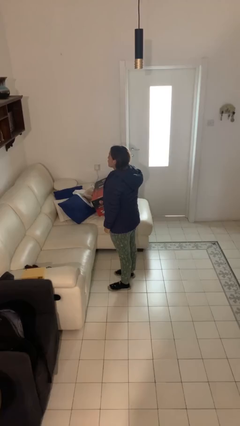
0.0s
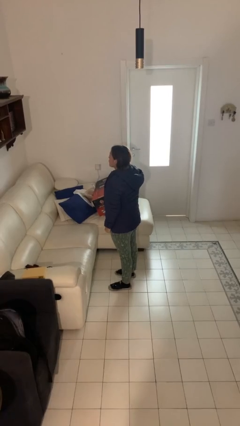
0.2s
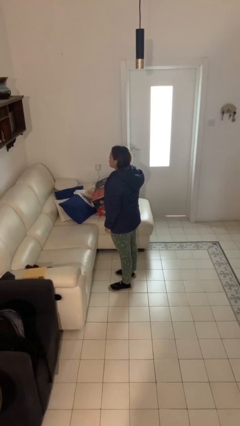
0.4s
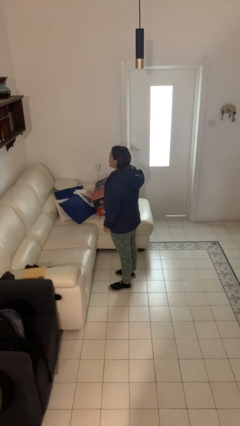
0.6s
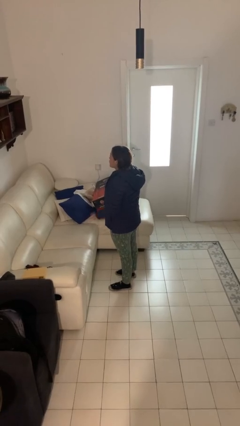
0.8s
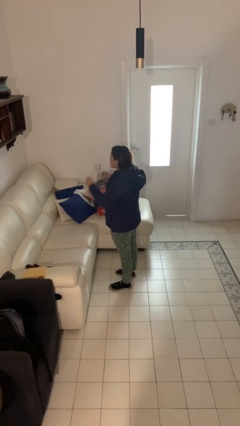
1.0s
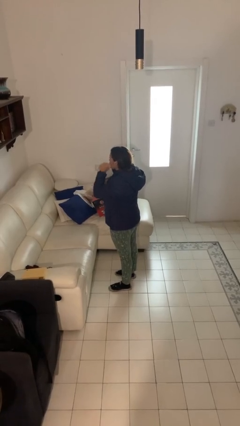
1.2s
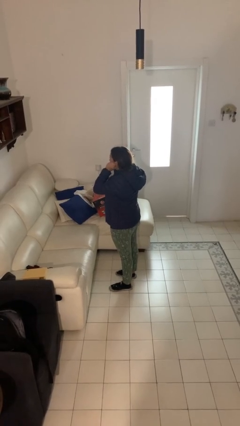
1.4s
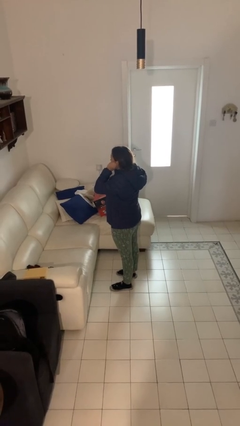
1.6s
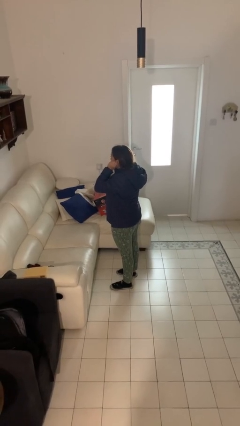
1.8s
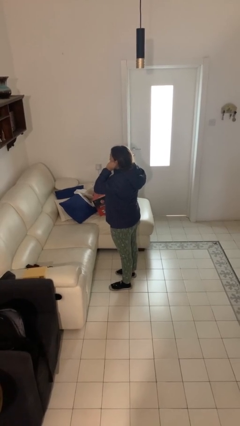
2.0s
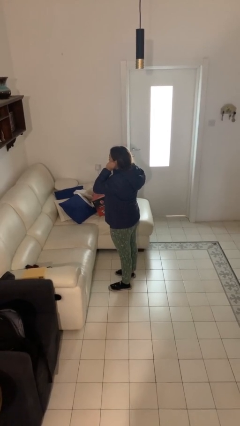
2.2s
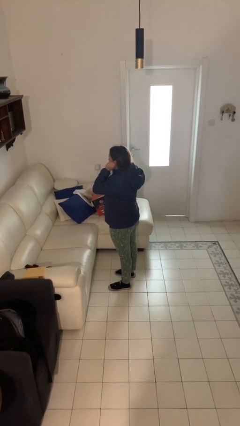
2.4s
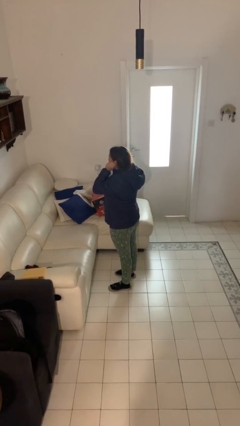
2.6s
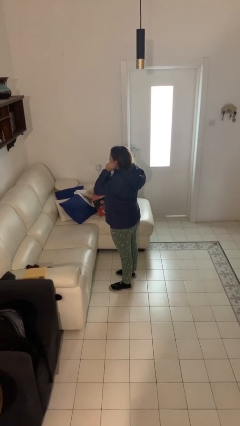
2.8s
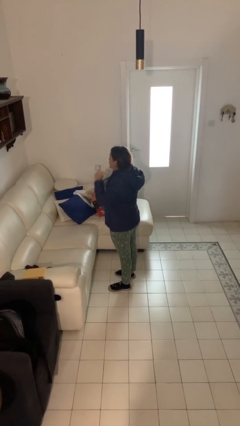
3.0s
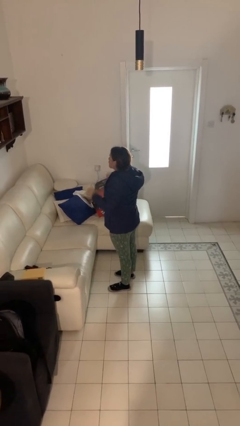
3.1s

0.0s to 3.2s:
person touches earlobe

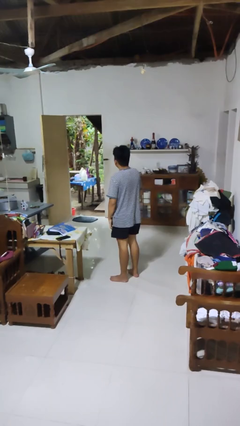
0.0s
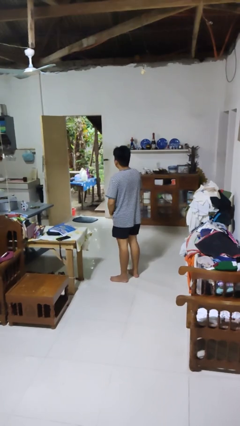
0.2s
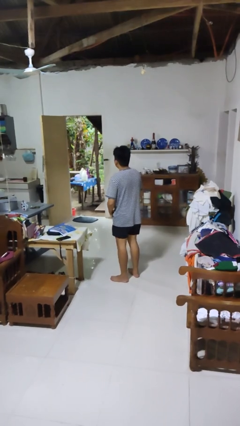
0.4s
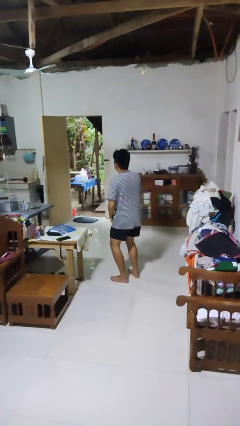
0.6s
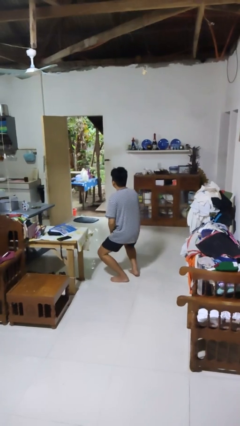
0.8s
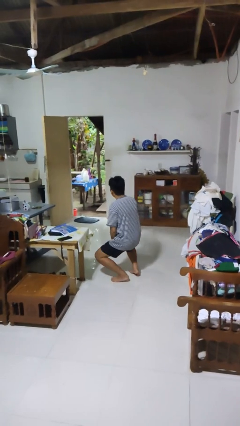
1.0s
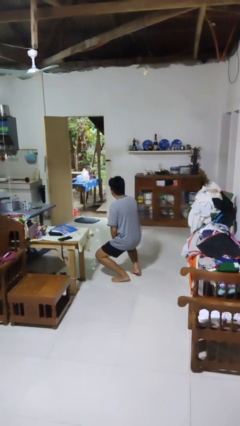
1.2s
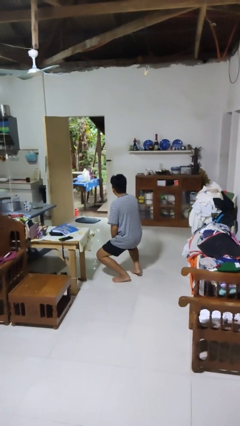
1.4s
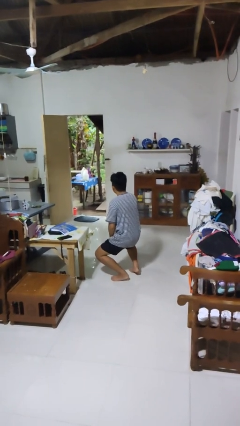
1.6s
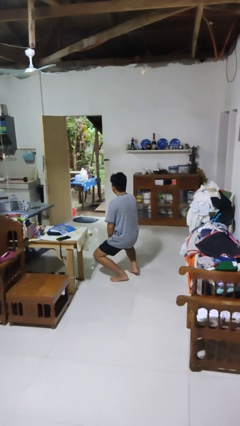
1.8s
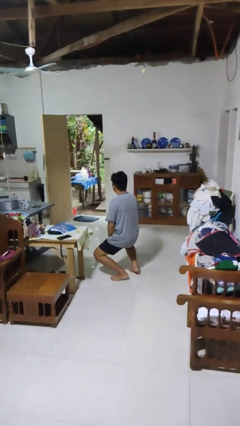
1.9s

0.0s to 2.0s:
person squats

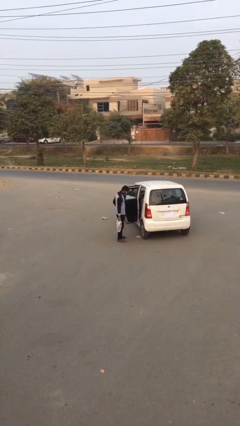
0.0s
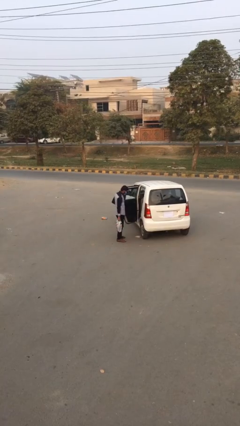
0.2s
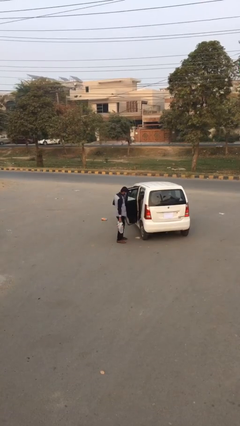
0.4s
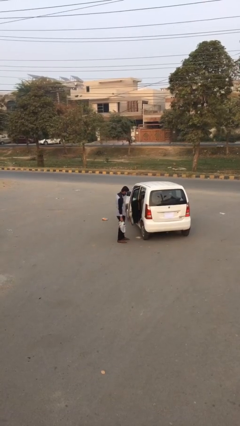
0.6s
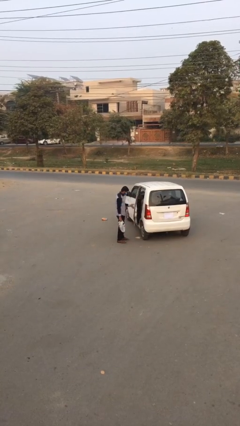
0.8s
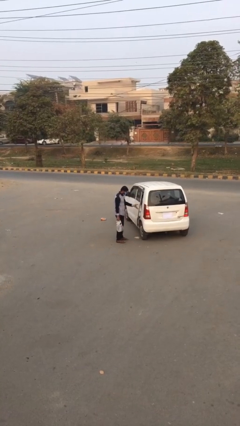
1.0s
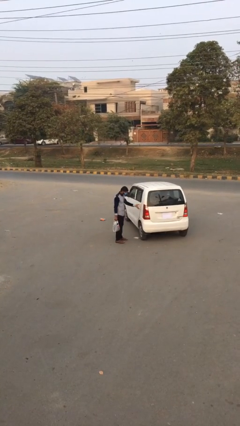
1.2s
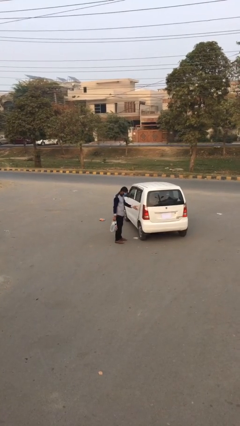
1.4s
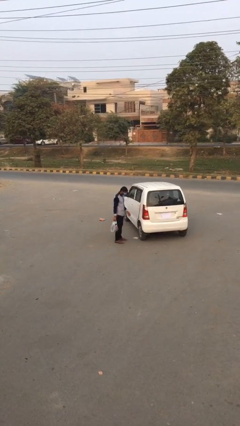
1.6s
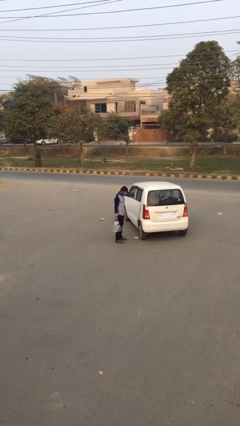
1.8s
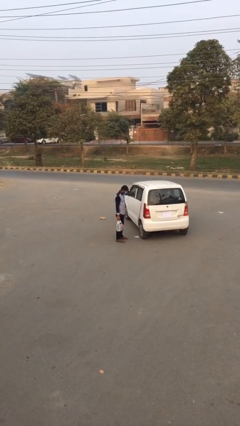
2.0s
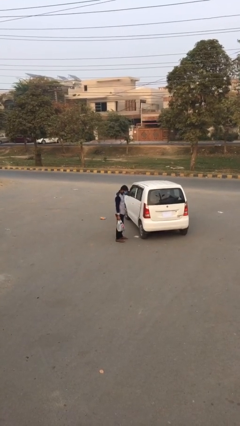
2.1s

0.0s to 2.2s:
person closes car door

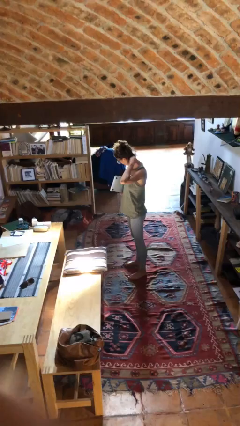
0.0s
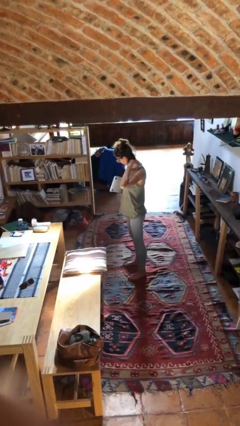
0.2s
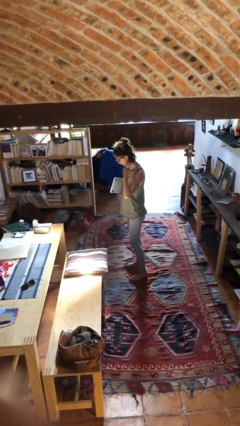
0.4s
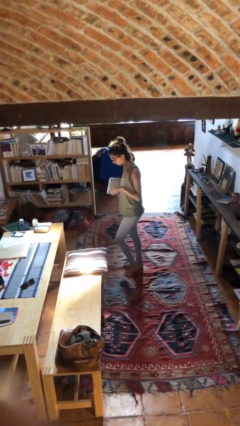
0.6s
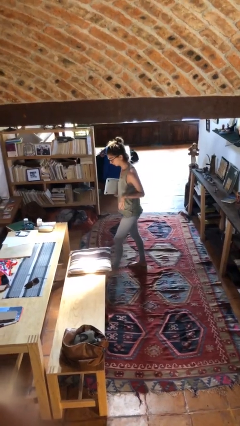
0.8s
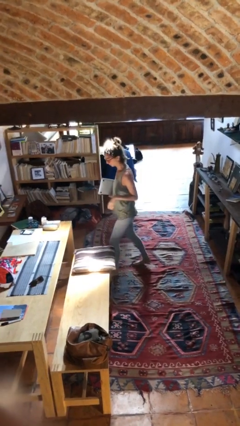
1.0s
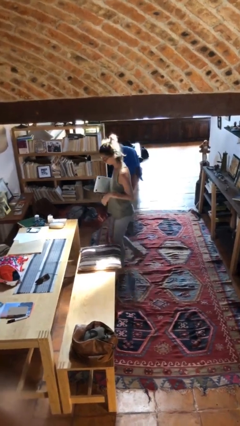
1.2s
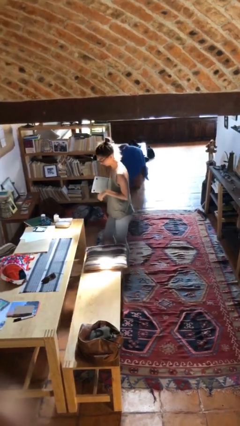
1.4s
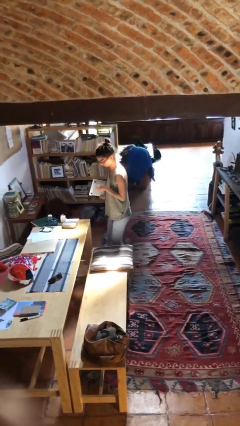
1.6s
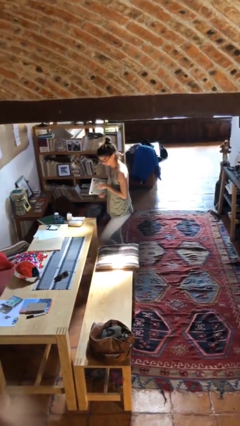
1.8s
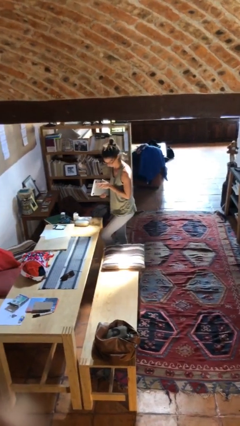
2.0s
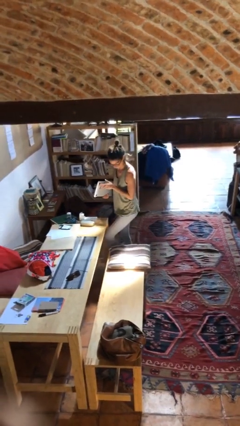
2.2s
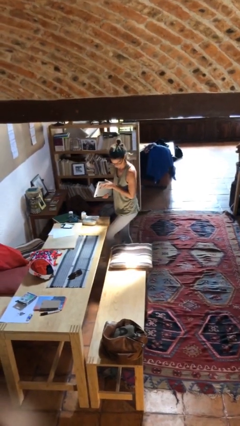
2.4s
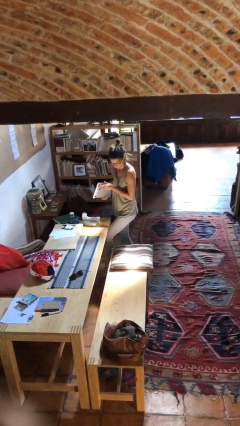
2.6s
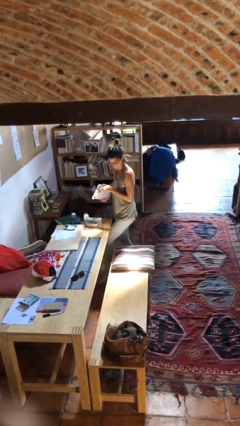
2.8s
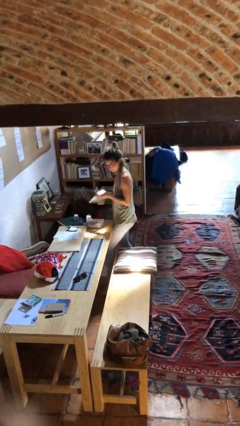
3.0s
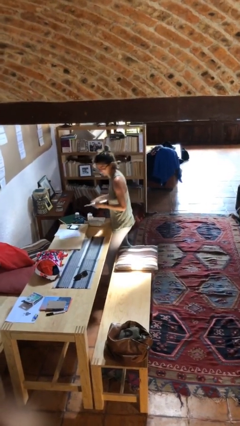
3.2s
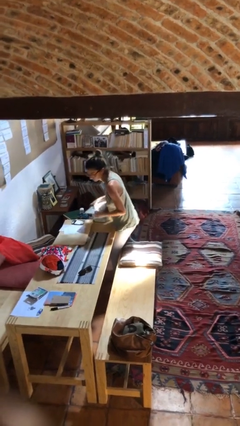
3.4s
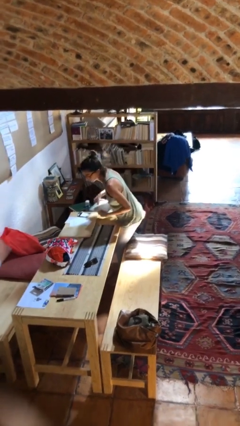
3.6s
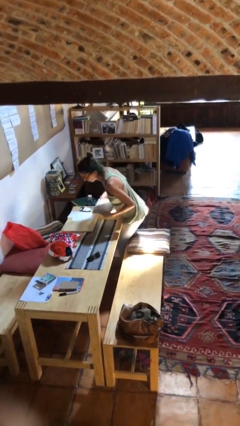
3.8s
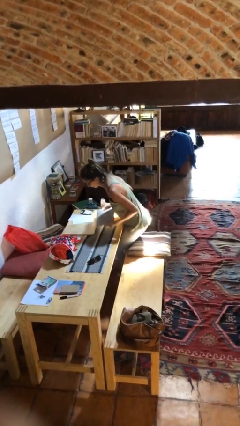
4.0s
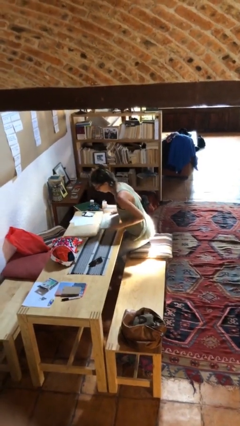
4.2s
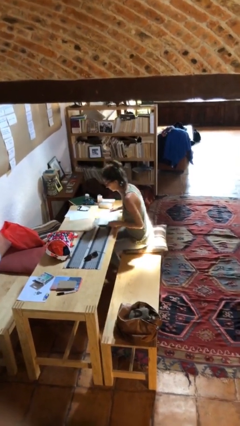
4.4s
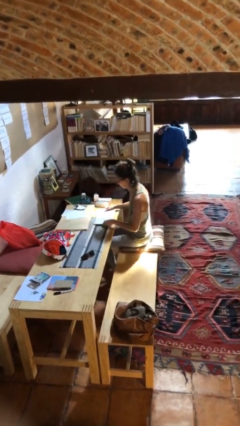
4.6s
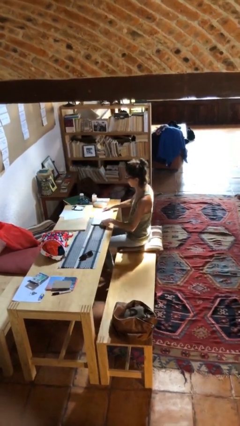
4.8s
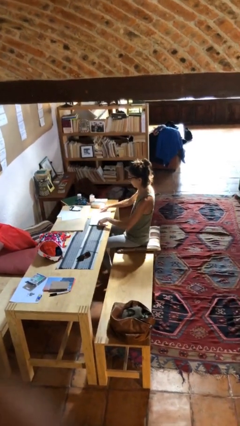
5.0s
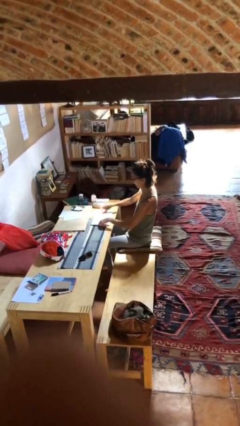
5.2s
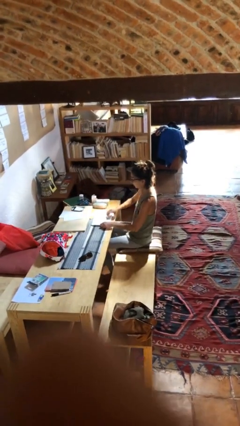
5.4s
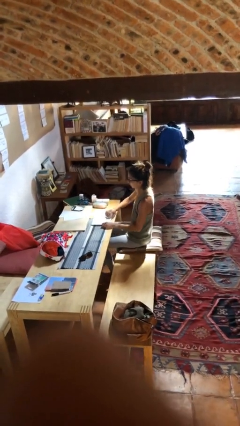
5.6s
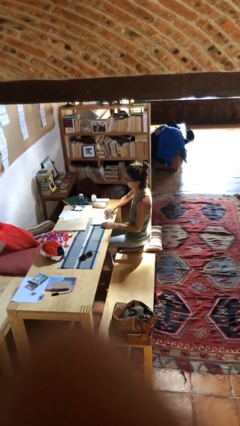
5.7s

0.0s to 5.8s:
person sits down

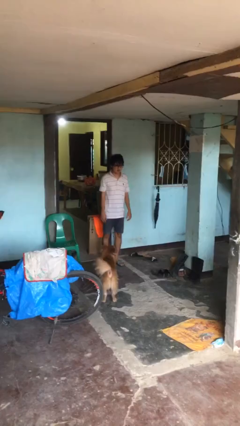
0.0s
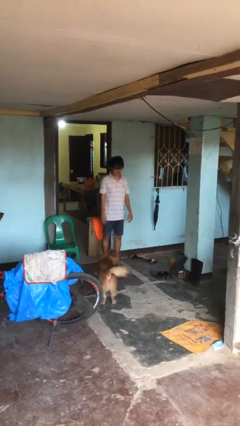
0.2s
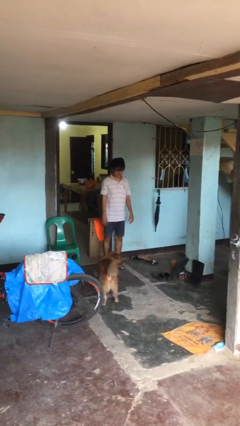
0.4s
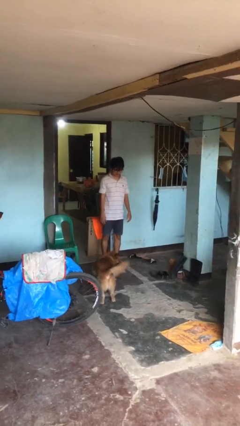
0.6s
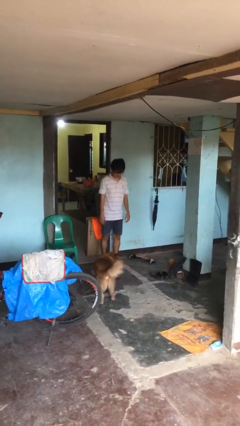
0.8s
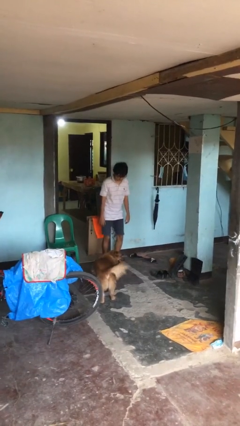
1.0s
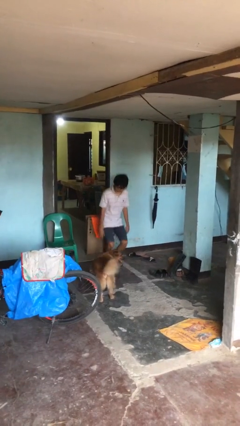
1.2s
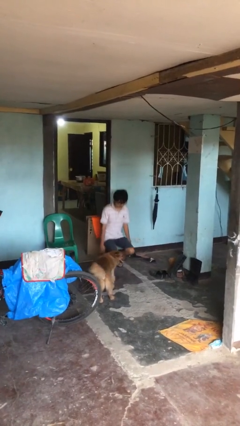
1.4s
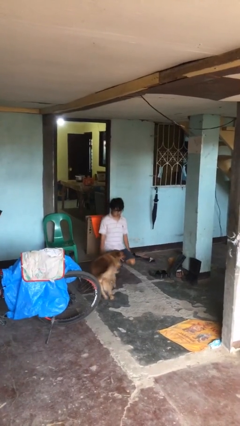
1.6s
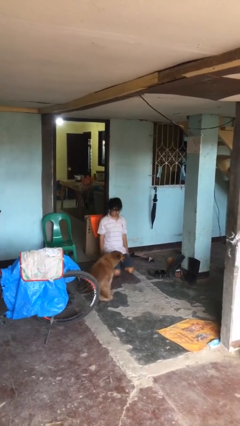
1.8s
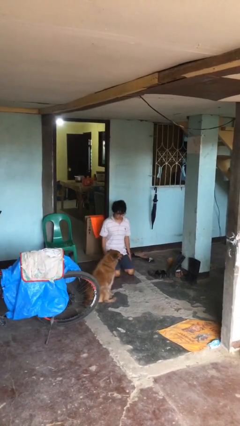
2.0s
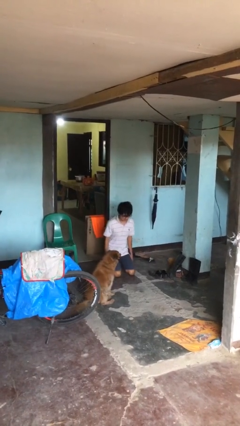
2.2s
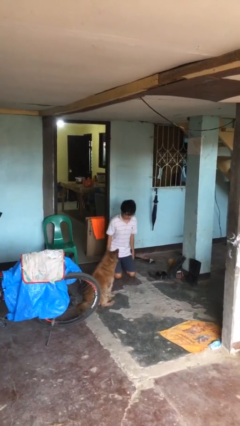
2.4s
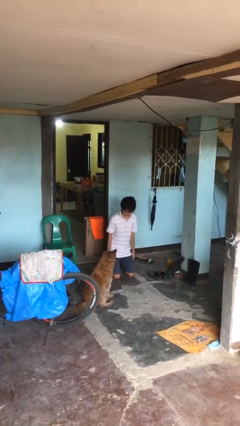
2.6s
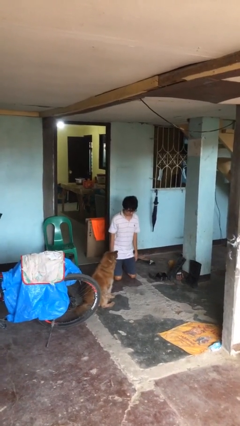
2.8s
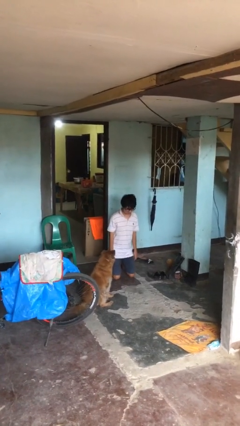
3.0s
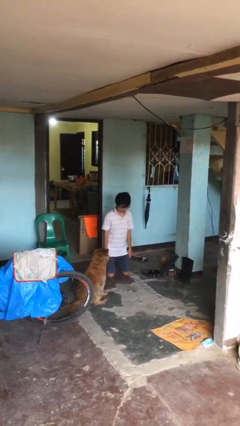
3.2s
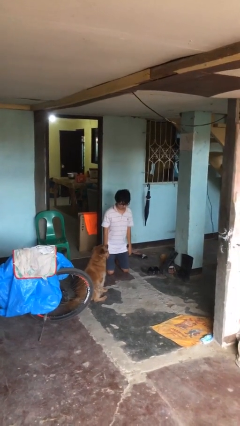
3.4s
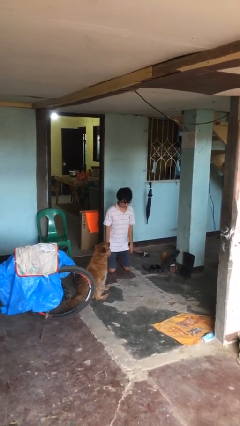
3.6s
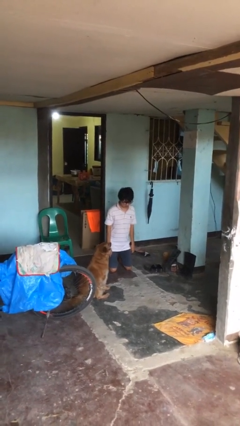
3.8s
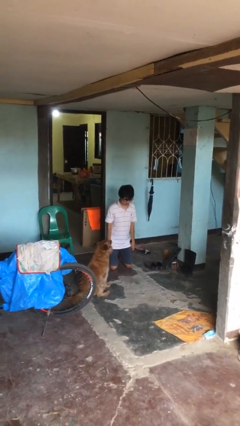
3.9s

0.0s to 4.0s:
person kneels

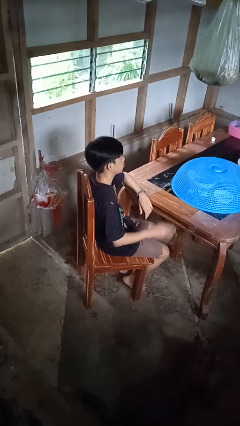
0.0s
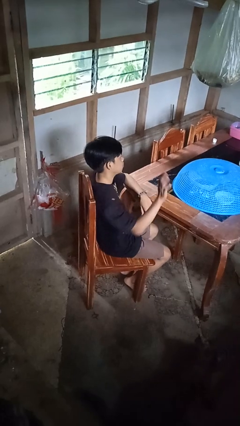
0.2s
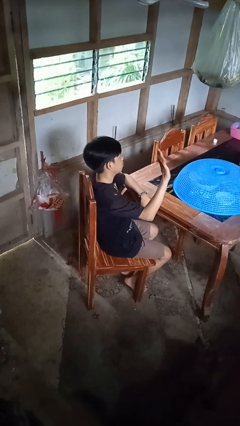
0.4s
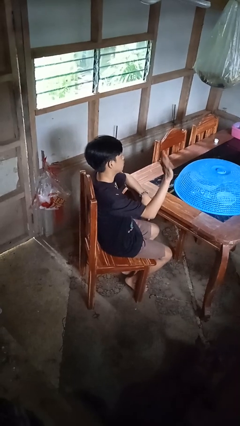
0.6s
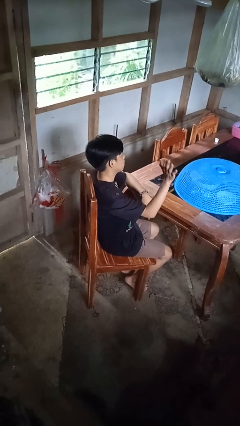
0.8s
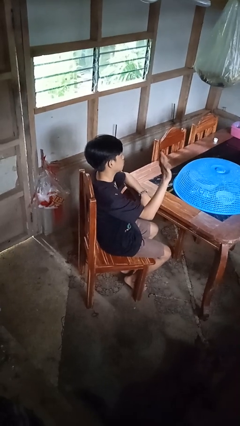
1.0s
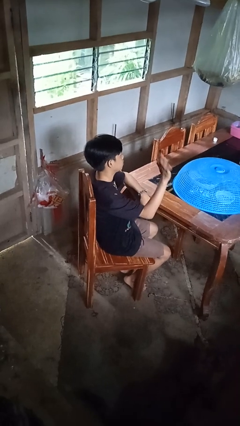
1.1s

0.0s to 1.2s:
person waves at person
